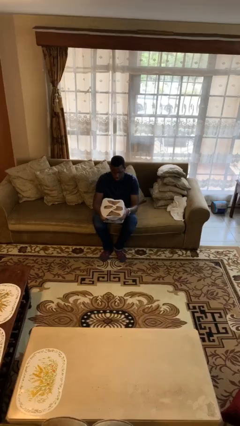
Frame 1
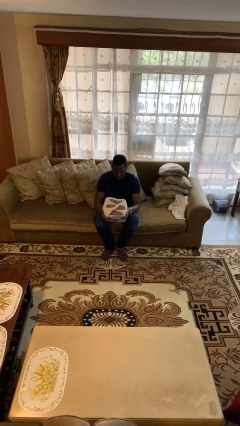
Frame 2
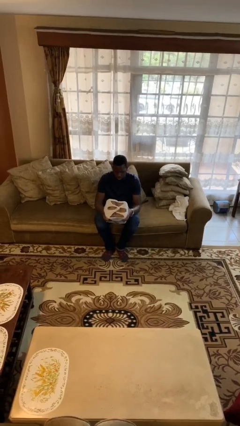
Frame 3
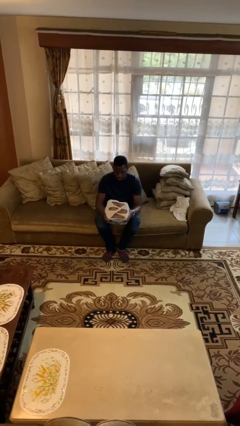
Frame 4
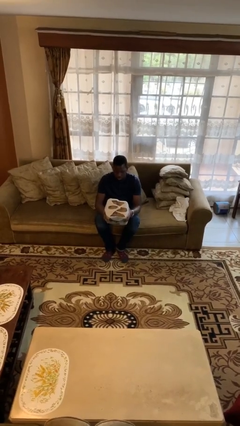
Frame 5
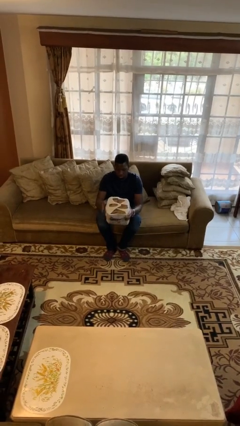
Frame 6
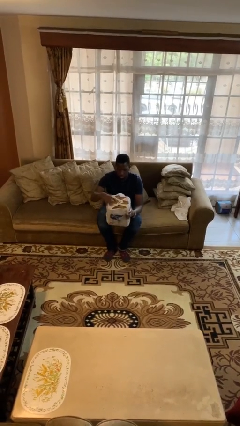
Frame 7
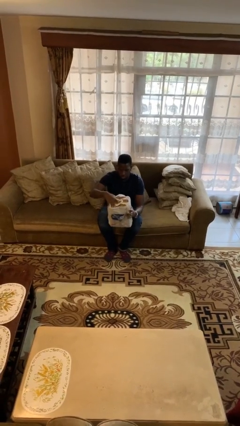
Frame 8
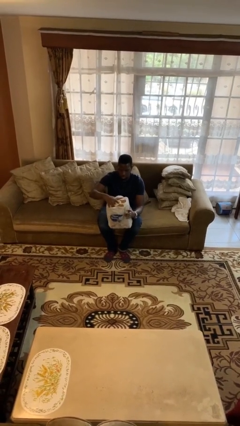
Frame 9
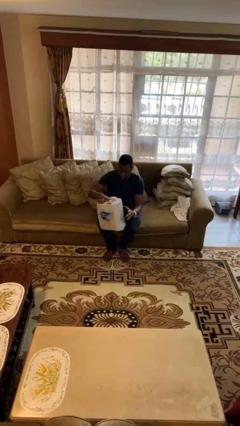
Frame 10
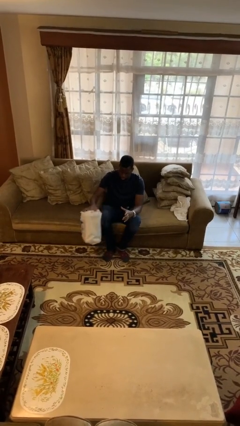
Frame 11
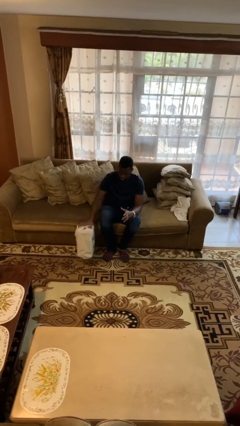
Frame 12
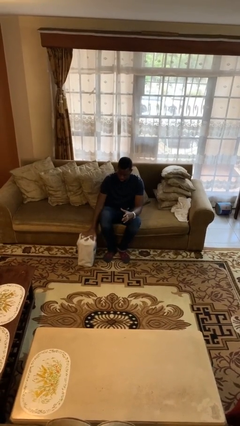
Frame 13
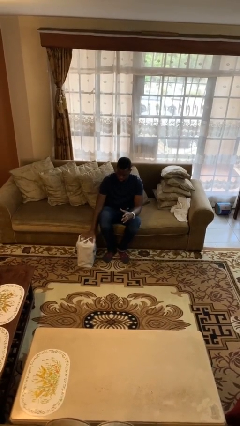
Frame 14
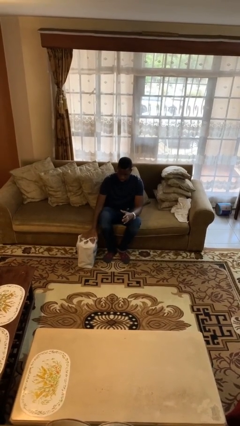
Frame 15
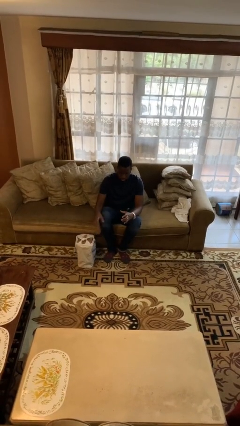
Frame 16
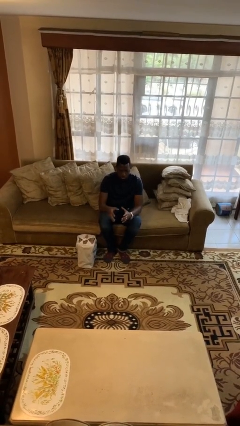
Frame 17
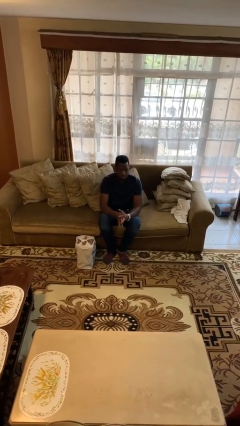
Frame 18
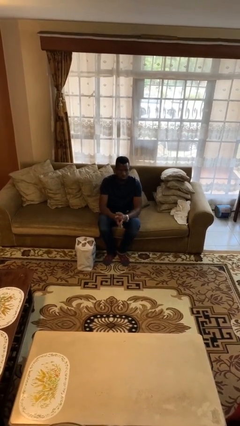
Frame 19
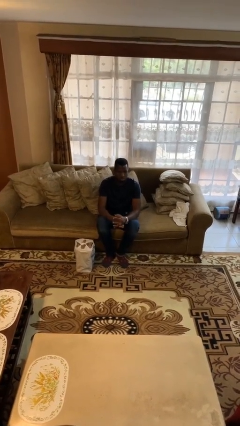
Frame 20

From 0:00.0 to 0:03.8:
person puts down object on floor

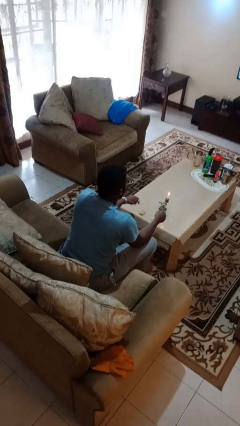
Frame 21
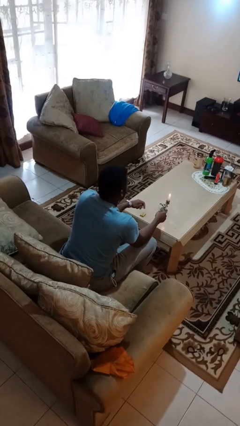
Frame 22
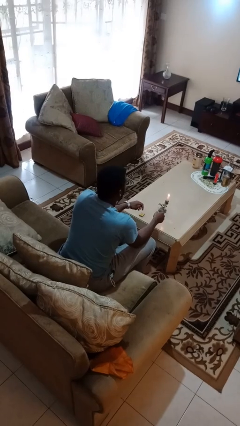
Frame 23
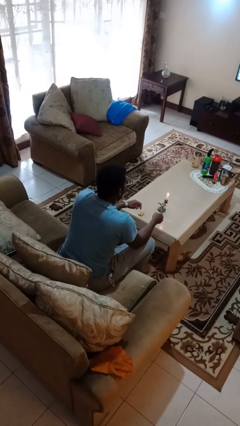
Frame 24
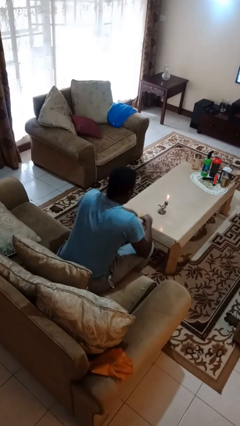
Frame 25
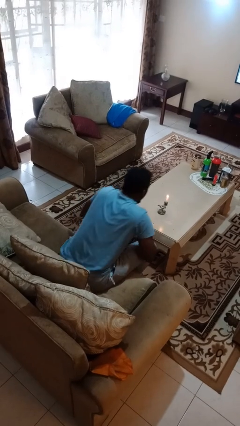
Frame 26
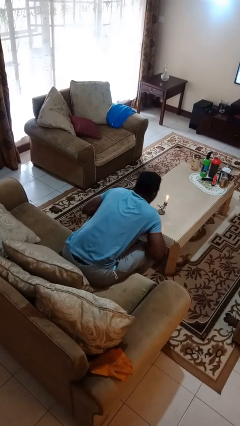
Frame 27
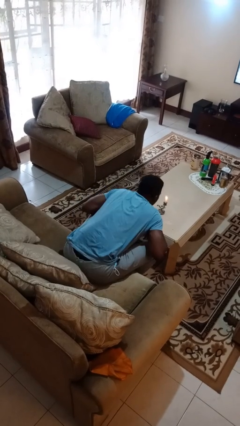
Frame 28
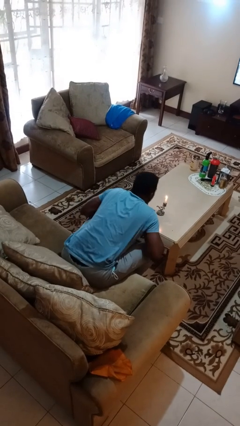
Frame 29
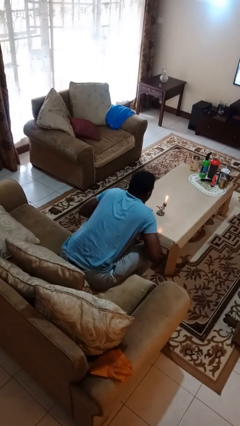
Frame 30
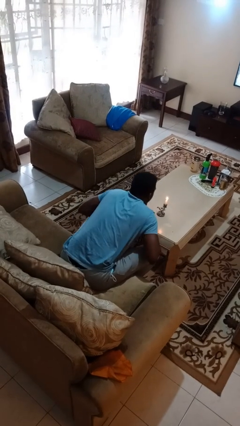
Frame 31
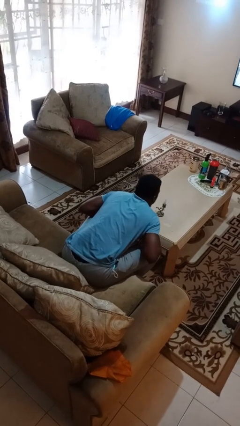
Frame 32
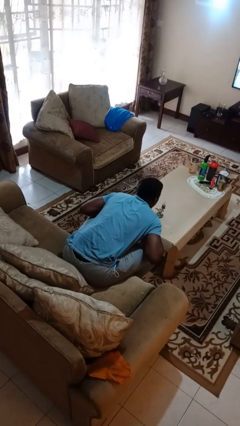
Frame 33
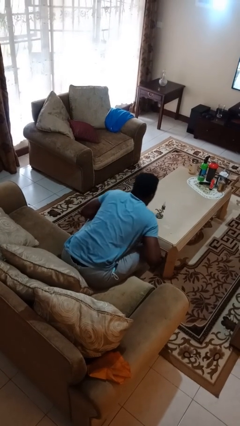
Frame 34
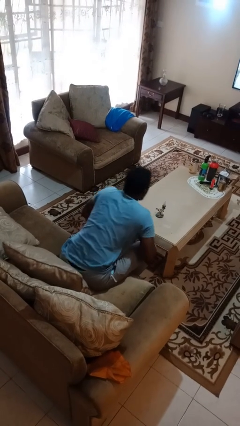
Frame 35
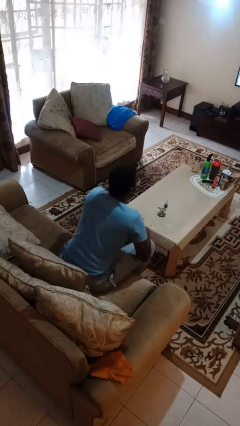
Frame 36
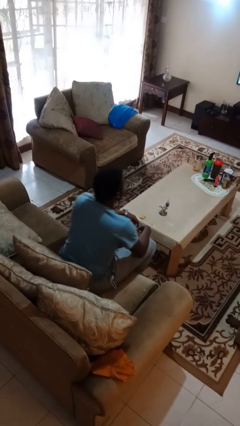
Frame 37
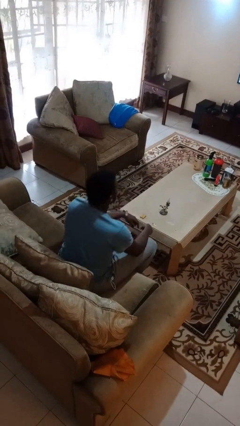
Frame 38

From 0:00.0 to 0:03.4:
person extinguishes candle

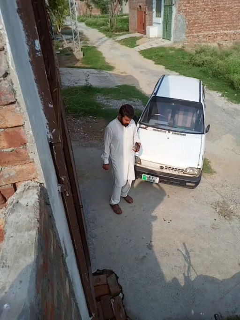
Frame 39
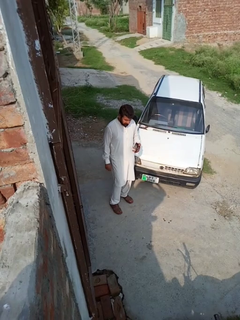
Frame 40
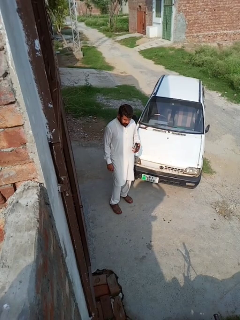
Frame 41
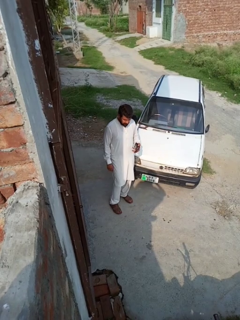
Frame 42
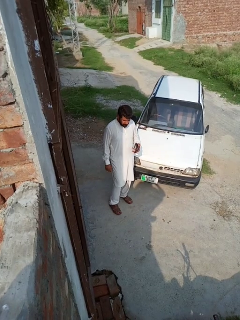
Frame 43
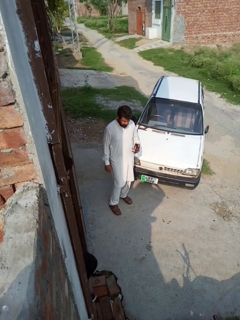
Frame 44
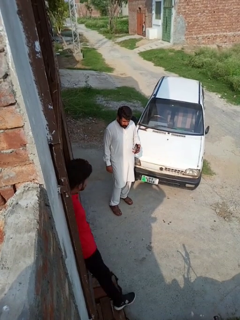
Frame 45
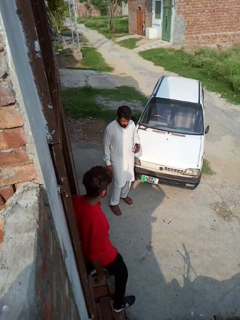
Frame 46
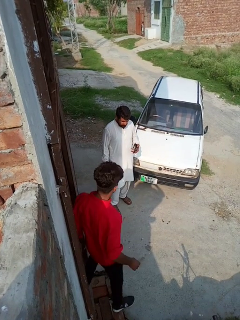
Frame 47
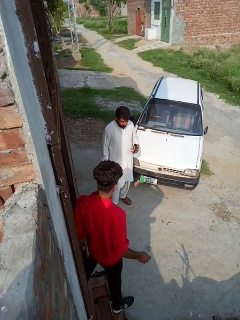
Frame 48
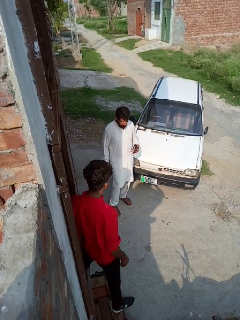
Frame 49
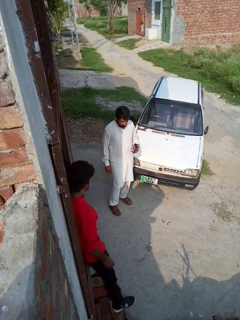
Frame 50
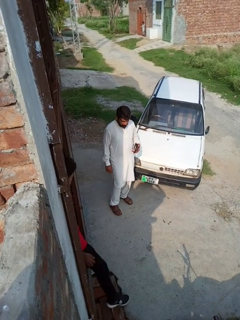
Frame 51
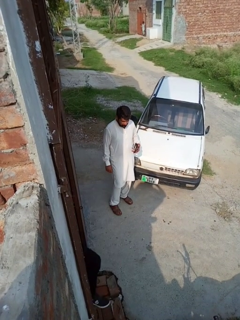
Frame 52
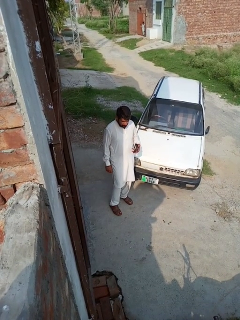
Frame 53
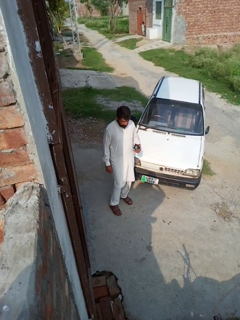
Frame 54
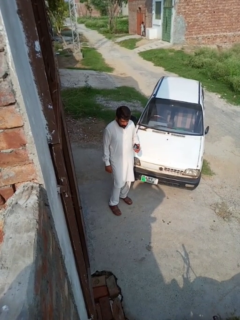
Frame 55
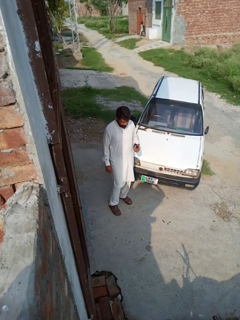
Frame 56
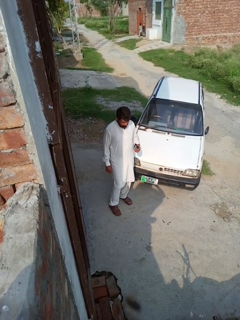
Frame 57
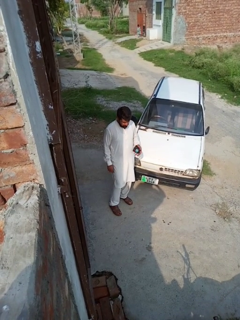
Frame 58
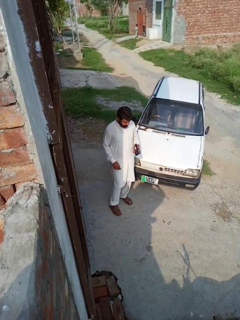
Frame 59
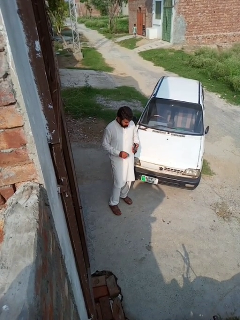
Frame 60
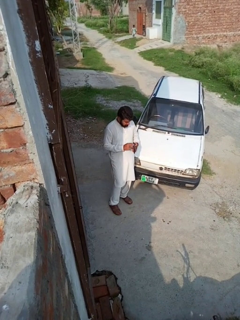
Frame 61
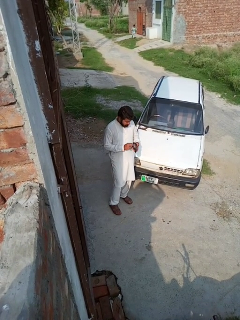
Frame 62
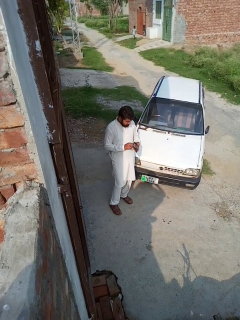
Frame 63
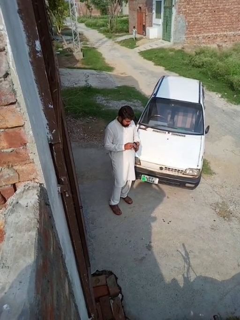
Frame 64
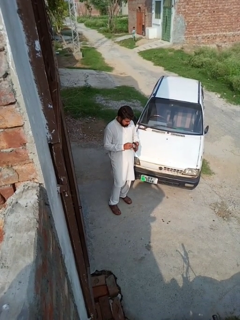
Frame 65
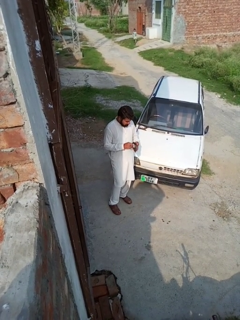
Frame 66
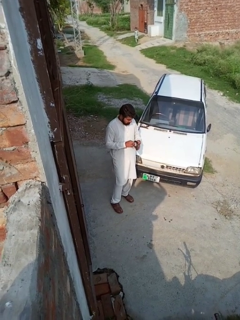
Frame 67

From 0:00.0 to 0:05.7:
person searches in purse

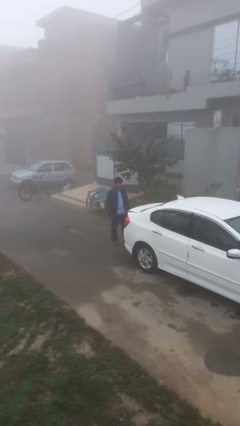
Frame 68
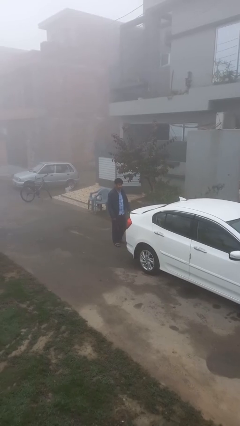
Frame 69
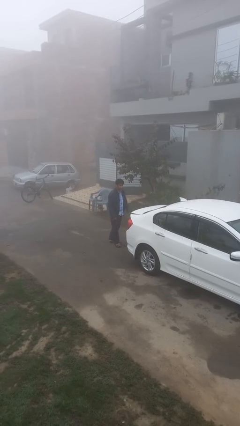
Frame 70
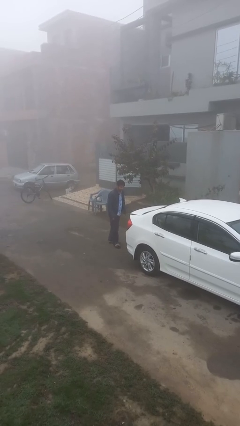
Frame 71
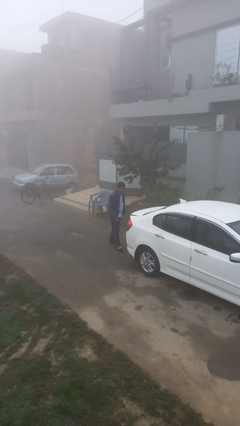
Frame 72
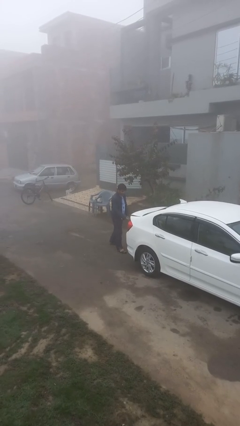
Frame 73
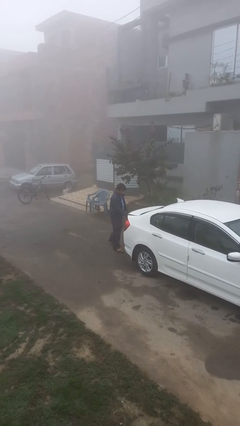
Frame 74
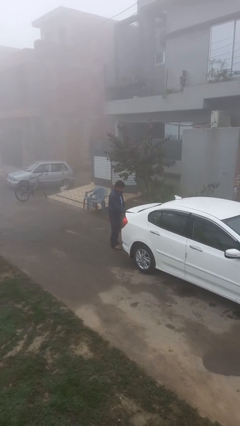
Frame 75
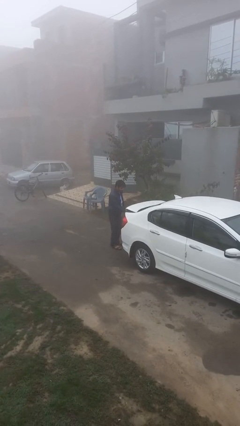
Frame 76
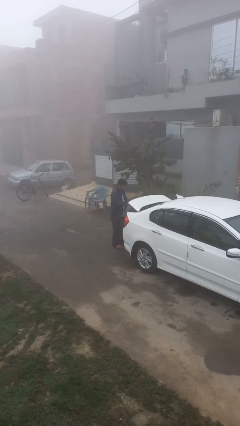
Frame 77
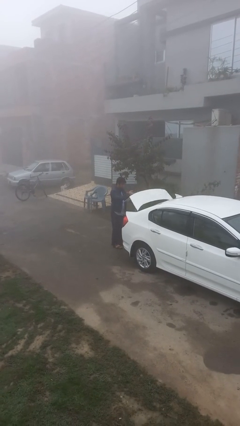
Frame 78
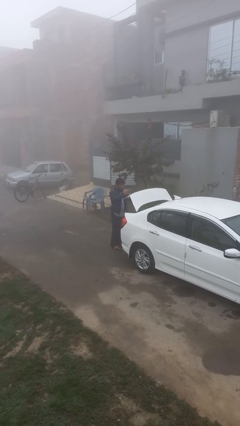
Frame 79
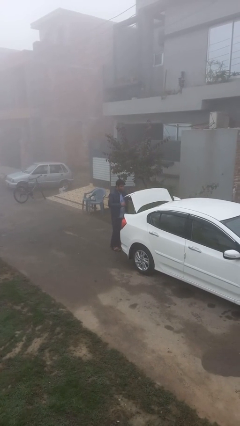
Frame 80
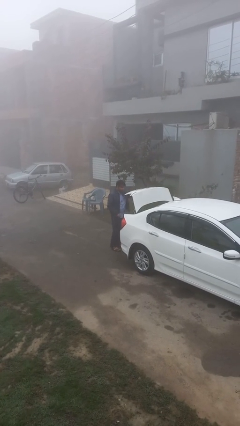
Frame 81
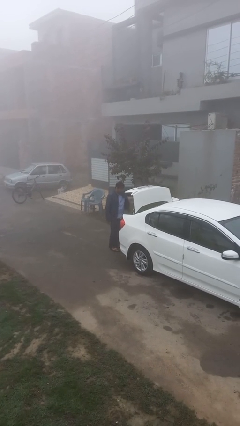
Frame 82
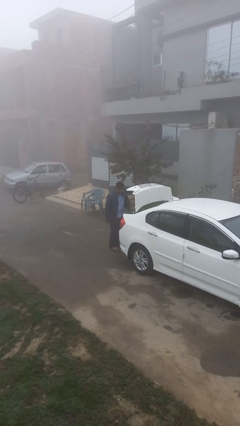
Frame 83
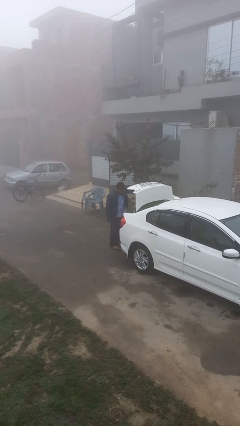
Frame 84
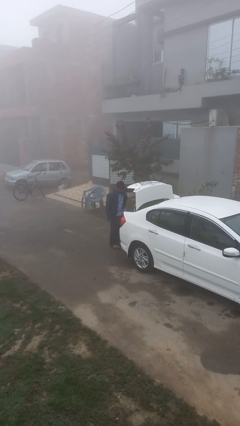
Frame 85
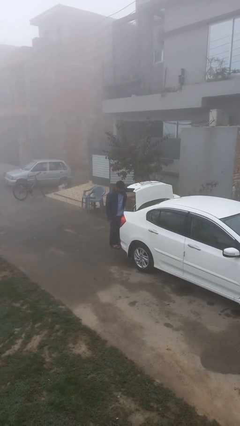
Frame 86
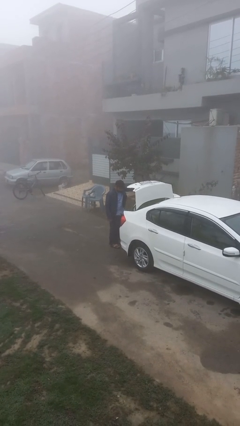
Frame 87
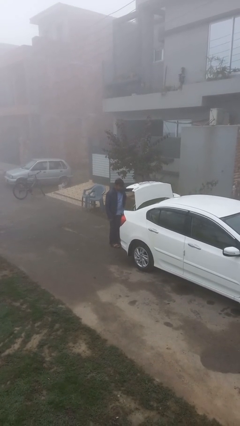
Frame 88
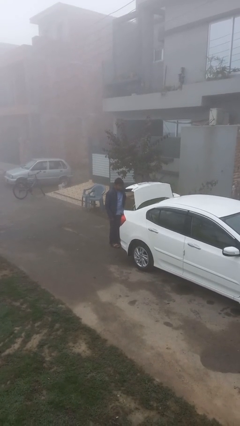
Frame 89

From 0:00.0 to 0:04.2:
person opens car trunk

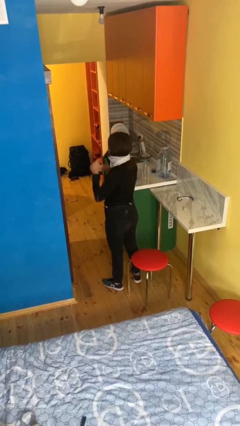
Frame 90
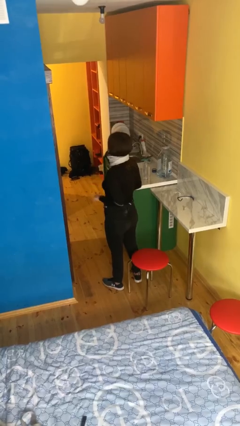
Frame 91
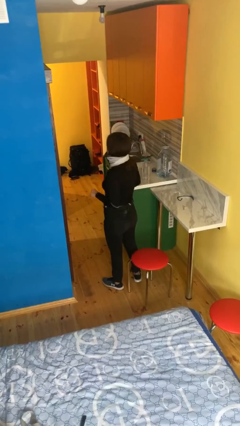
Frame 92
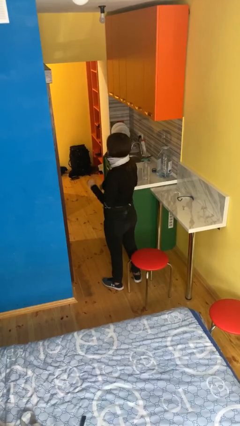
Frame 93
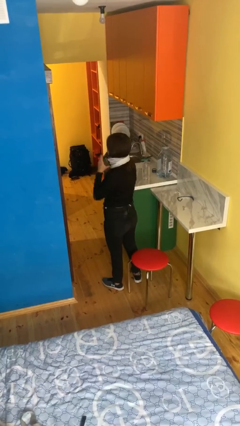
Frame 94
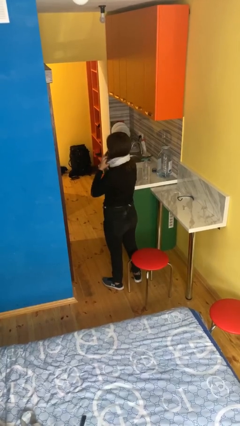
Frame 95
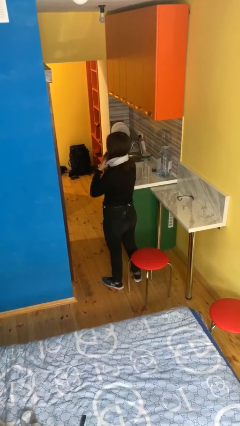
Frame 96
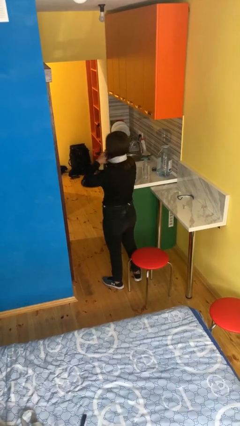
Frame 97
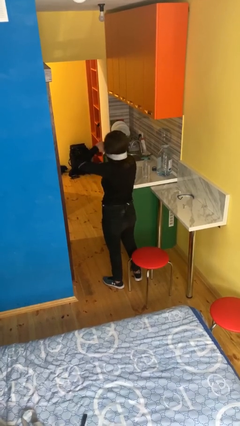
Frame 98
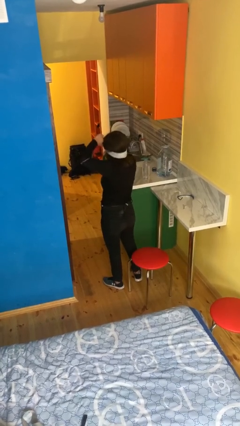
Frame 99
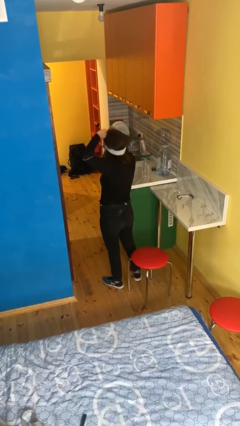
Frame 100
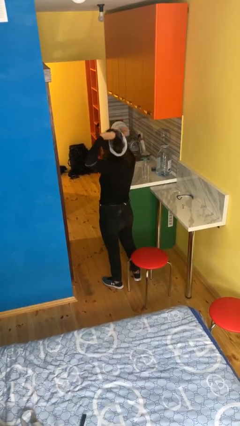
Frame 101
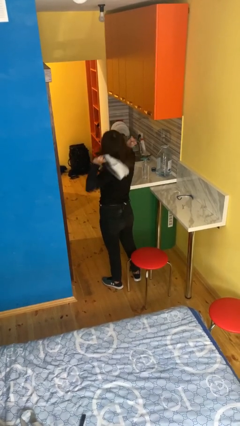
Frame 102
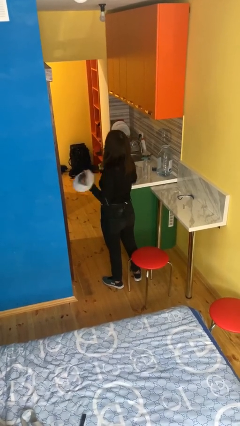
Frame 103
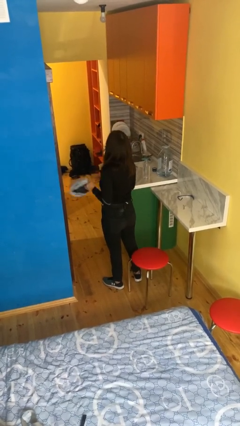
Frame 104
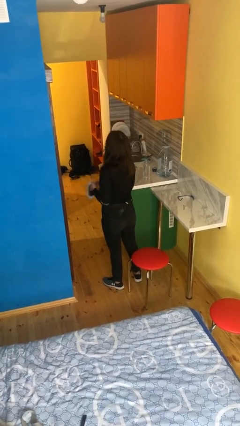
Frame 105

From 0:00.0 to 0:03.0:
person takes off scarf
